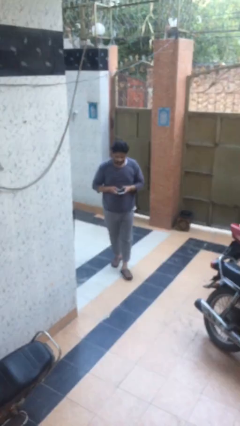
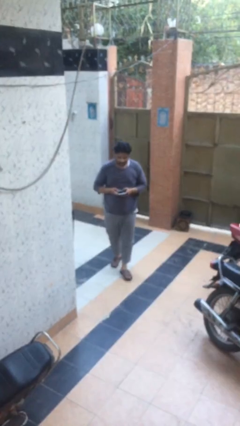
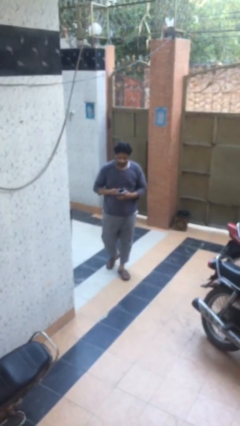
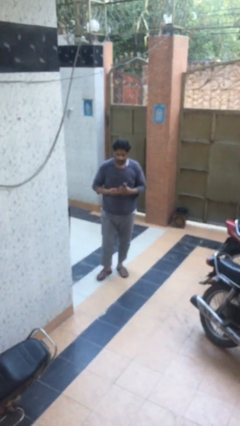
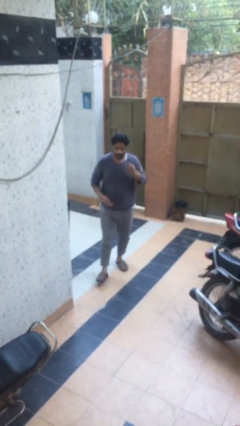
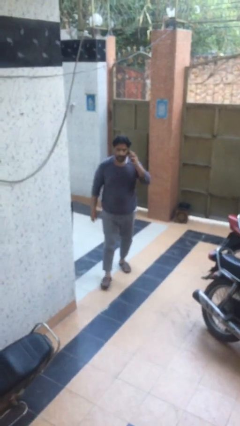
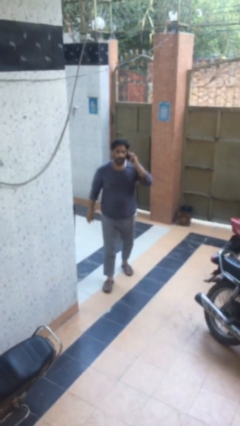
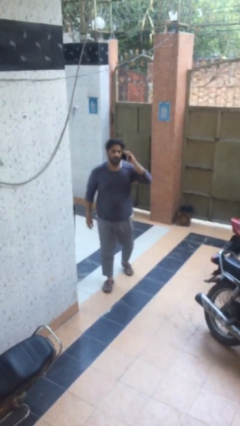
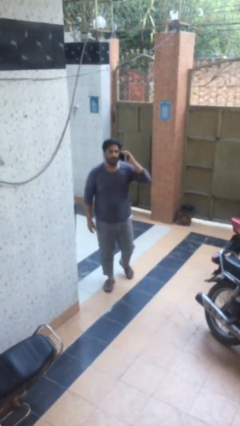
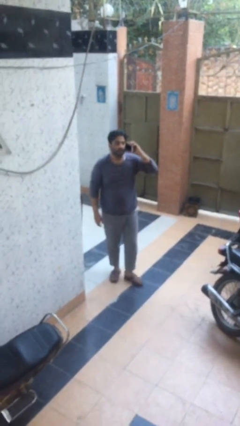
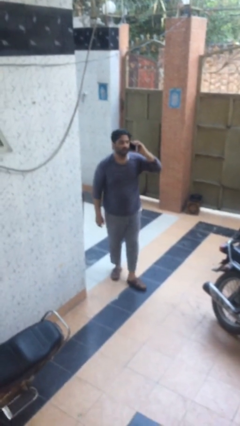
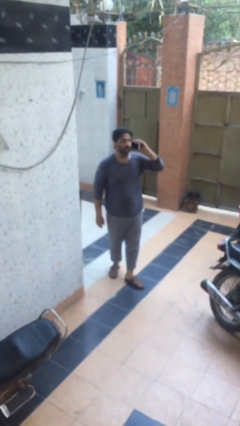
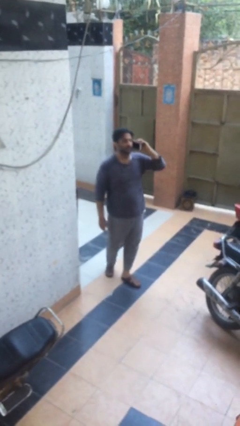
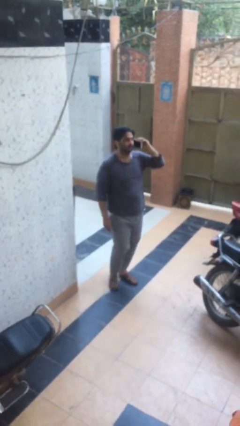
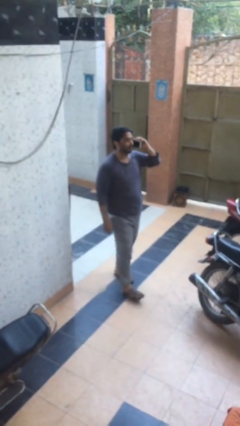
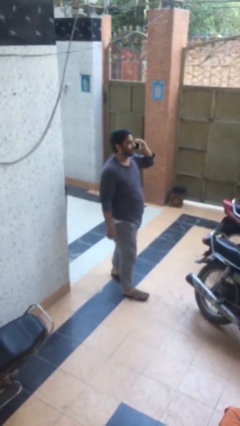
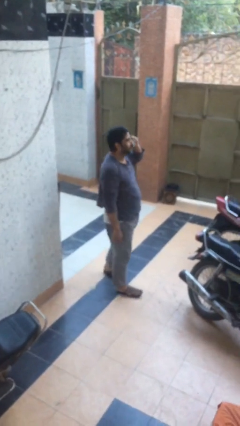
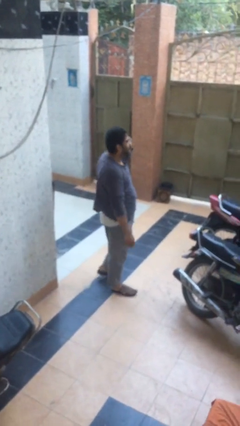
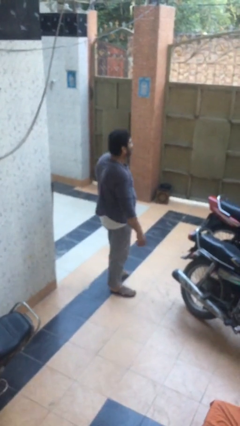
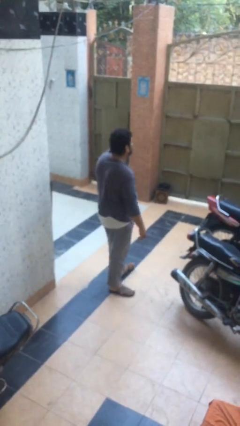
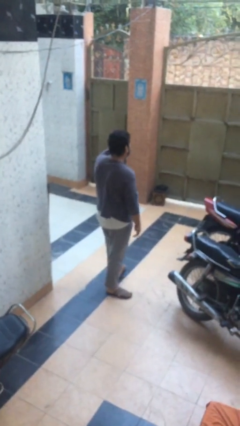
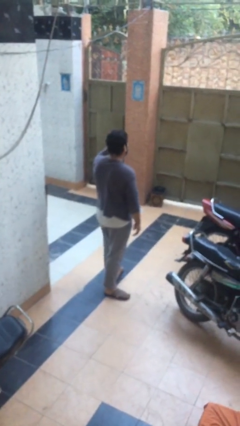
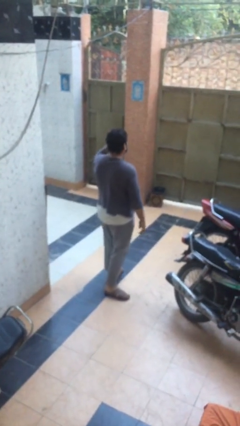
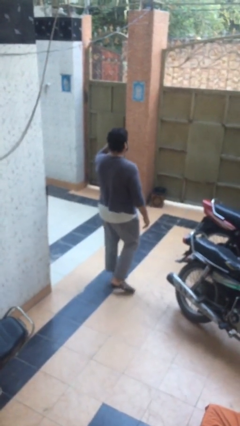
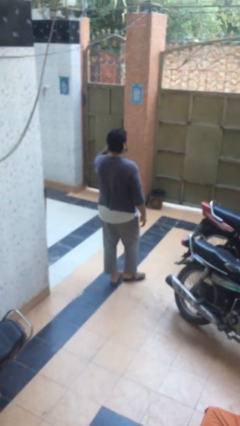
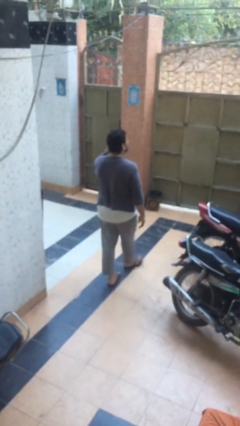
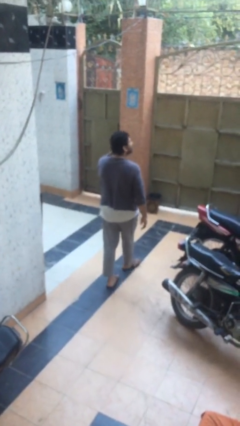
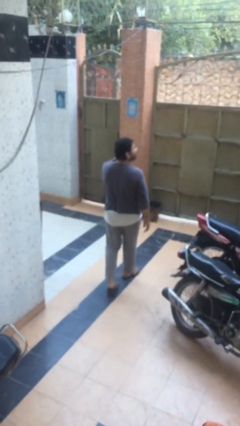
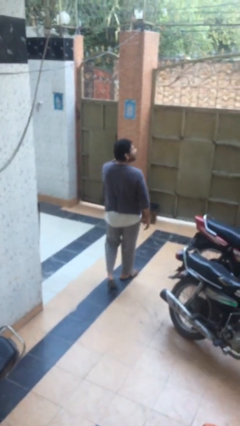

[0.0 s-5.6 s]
person talks on phone

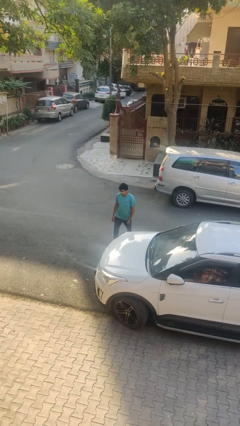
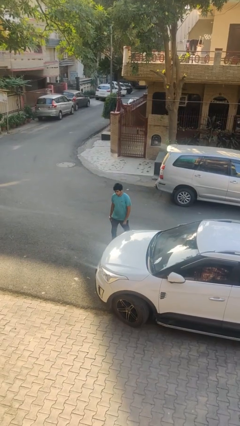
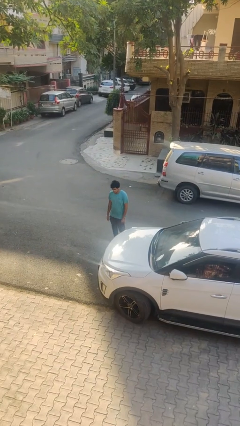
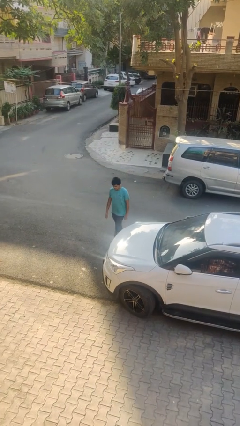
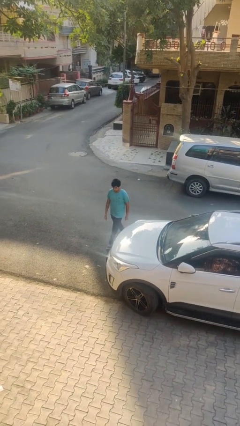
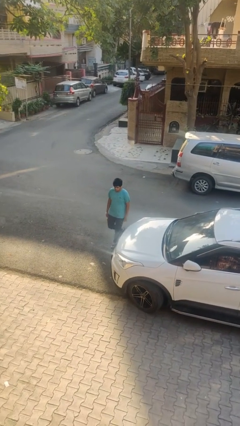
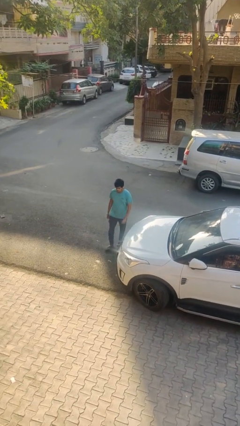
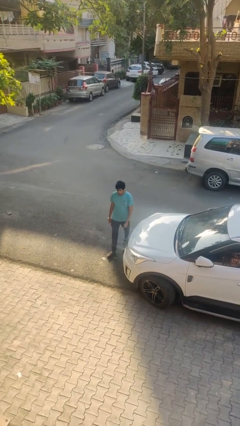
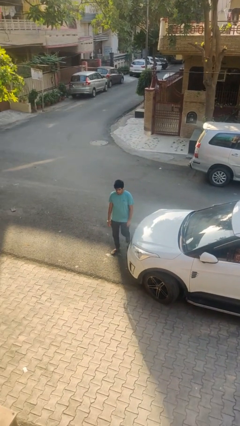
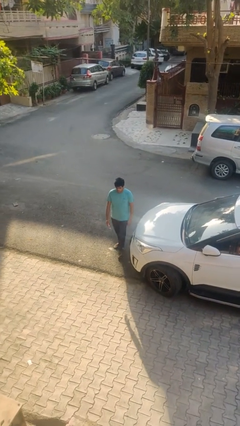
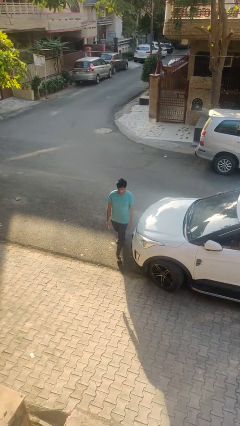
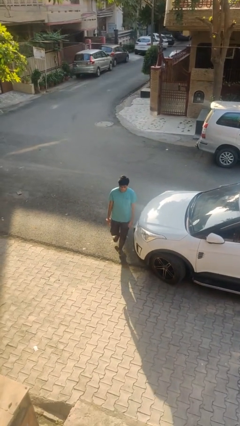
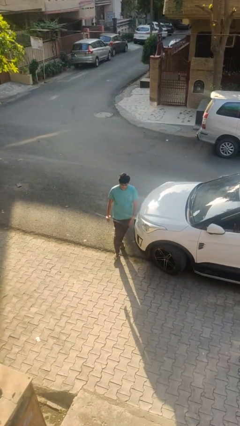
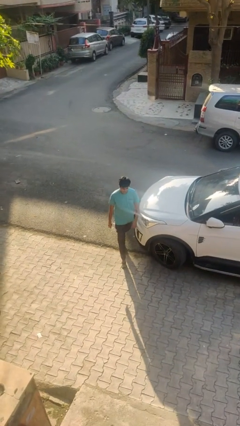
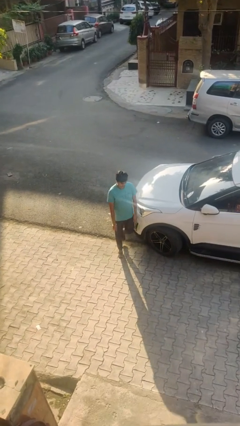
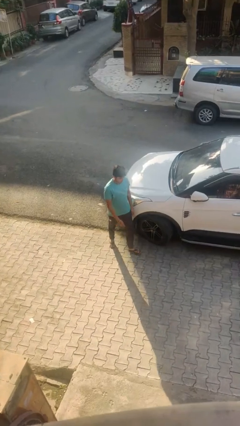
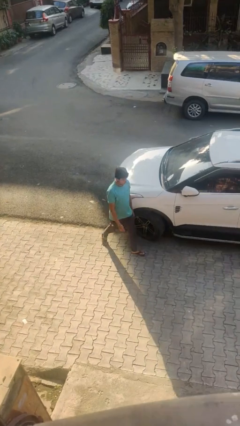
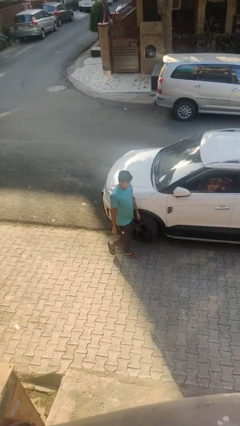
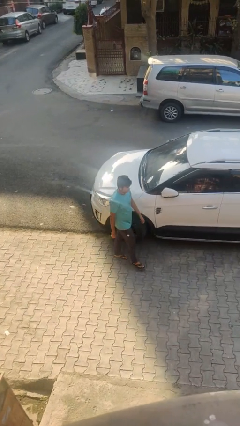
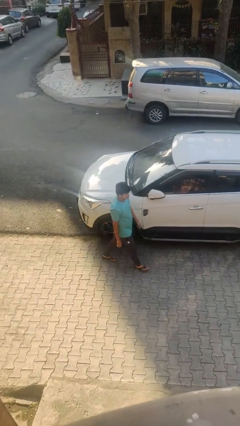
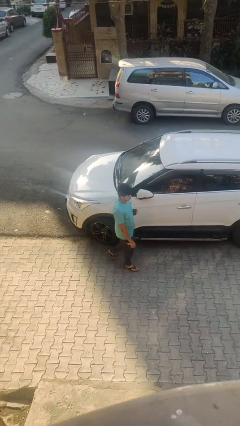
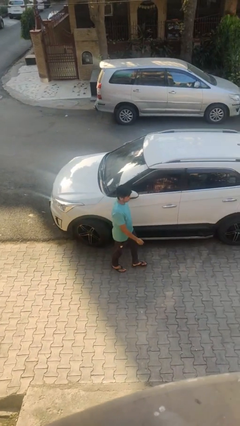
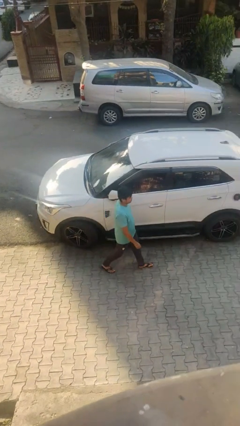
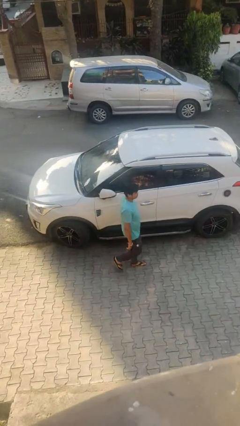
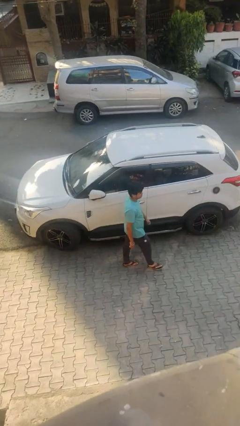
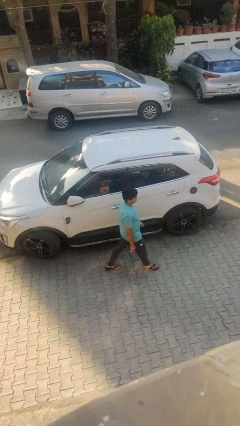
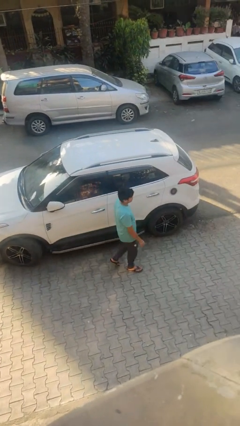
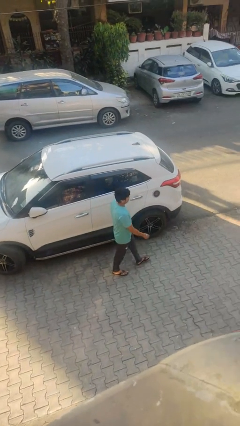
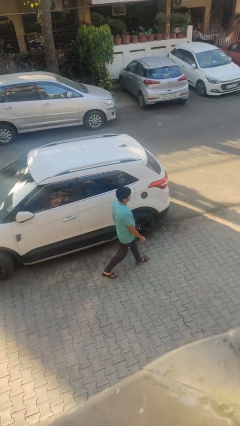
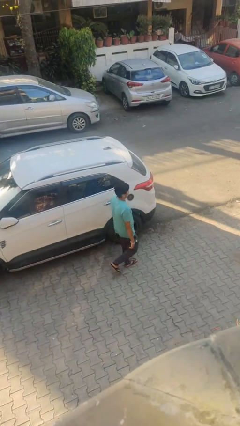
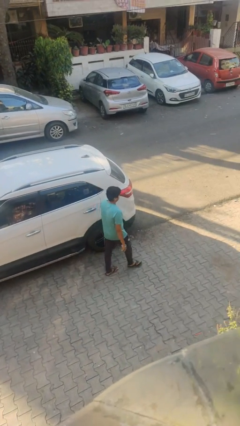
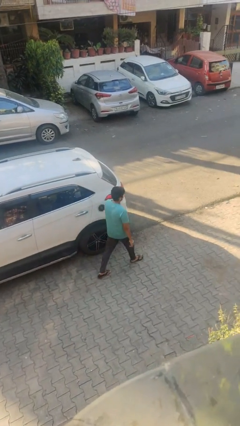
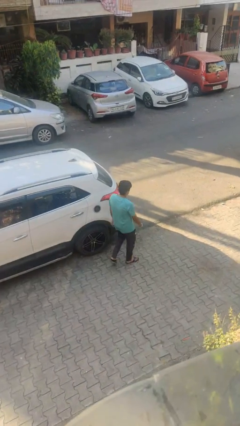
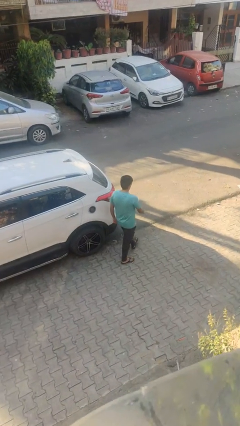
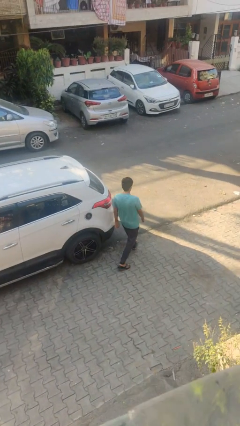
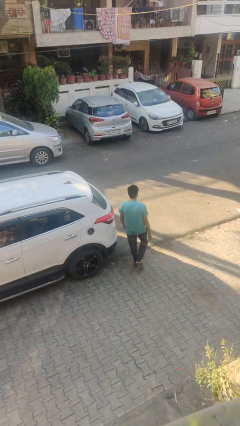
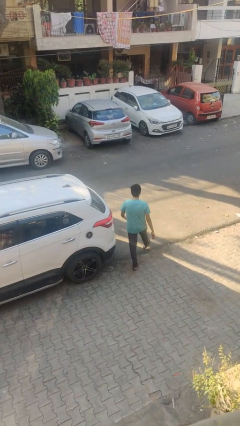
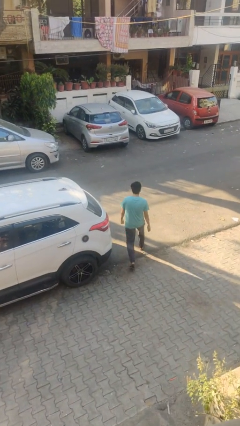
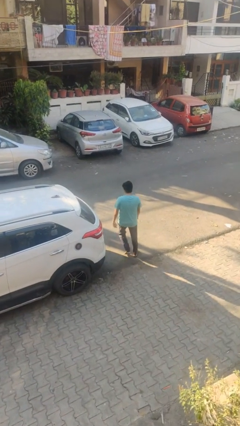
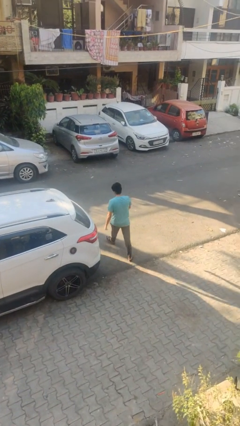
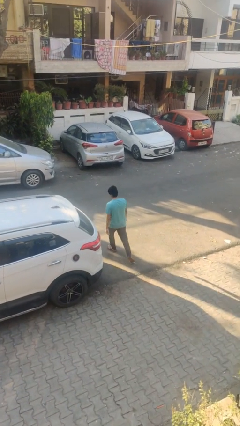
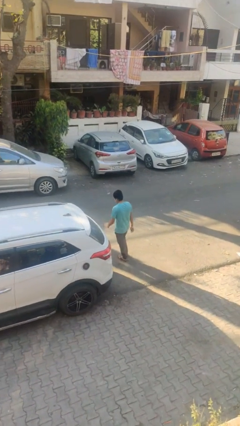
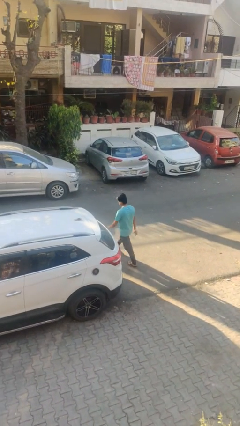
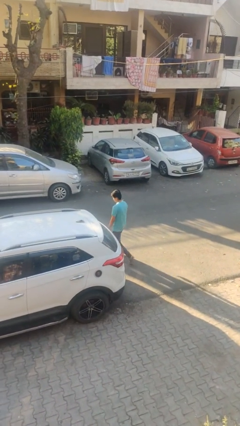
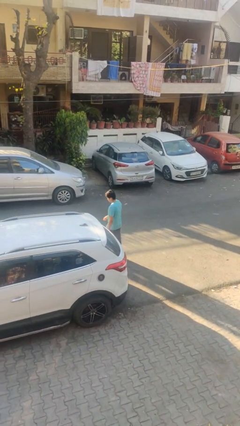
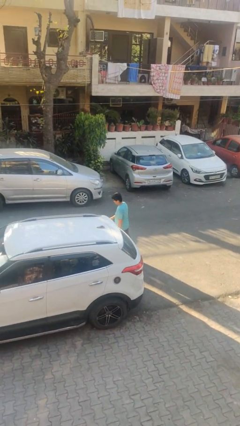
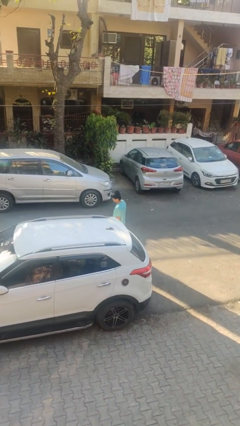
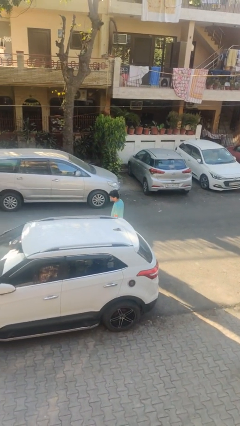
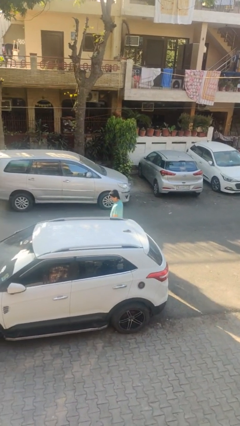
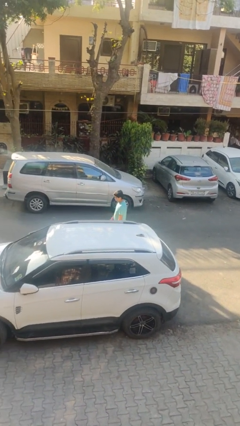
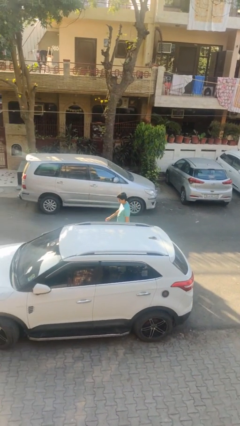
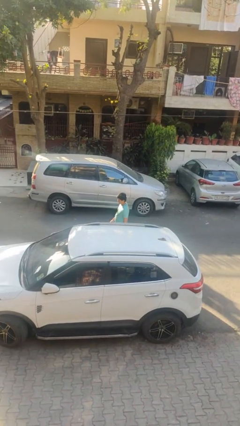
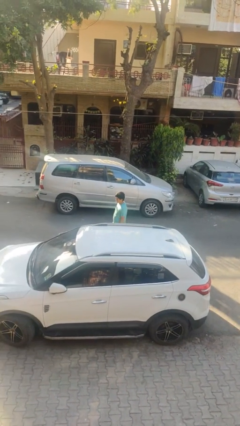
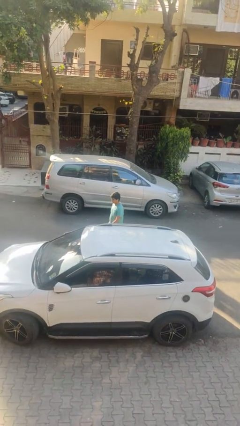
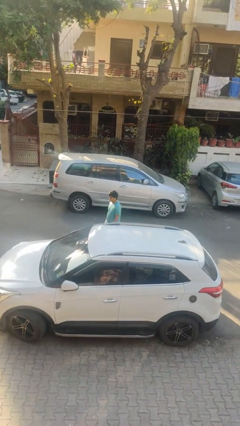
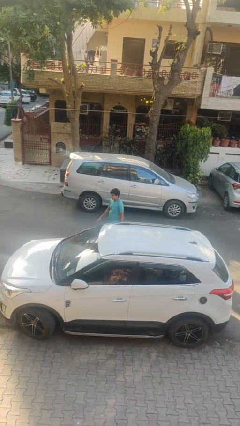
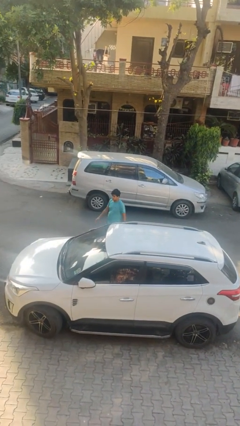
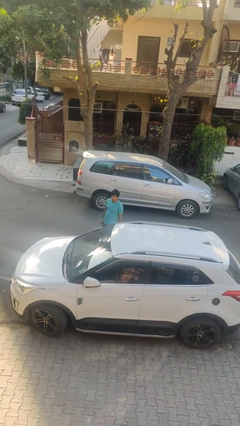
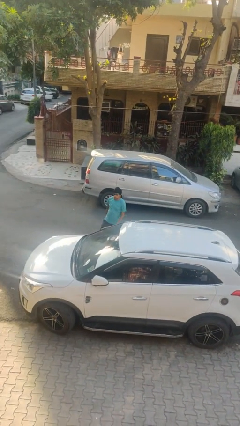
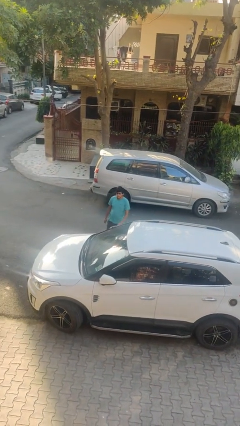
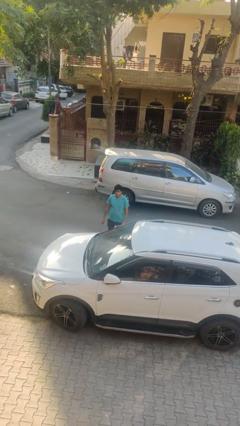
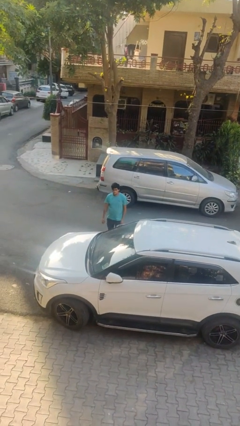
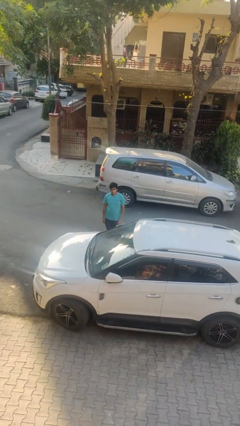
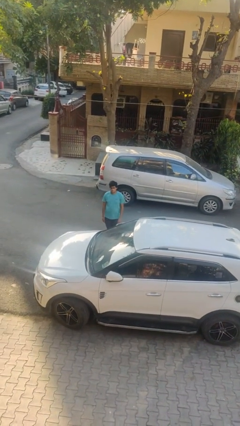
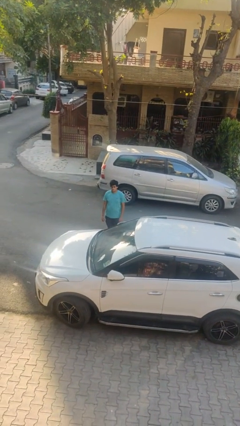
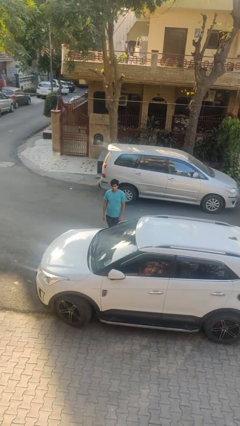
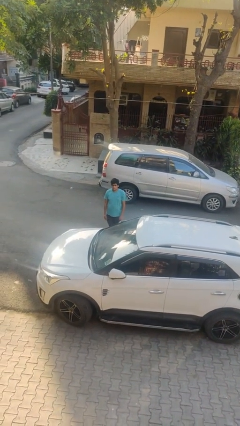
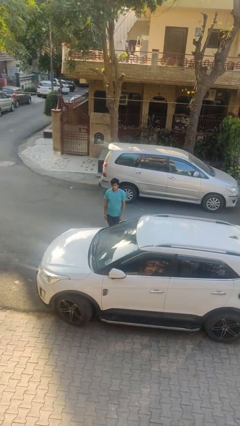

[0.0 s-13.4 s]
person walks around car
